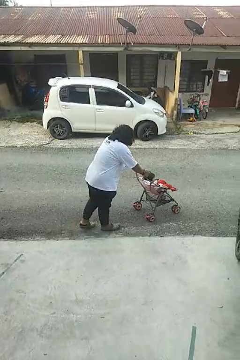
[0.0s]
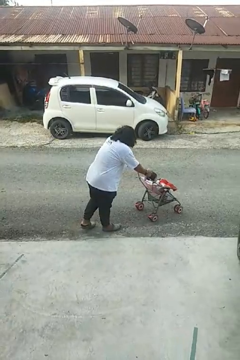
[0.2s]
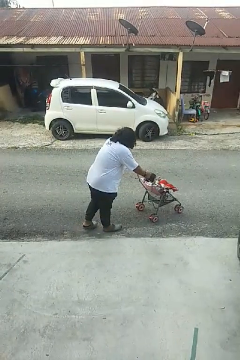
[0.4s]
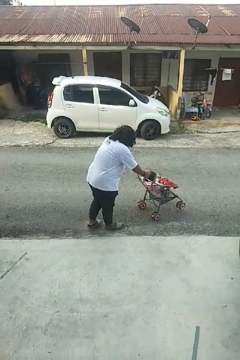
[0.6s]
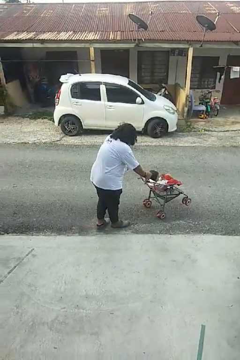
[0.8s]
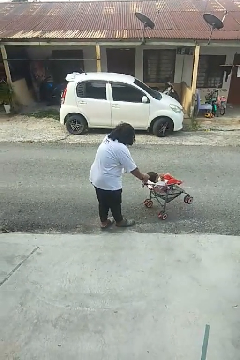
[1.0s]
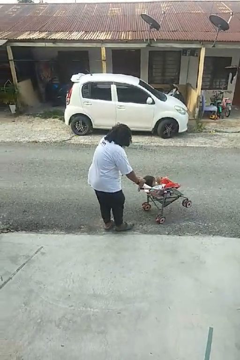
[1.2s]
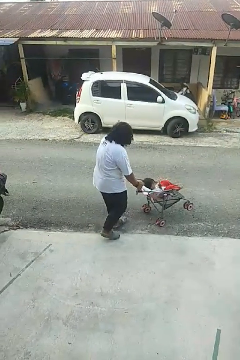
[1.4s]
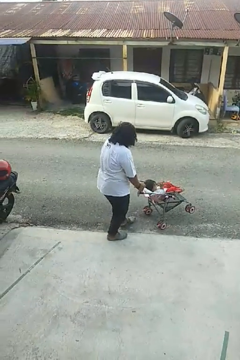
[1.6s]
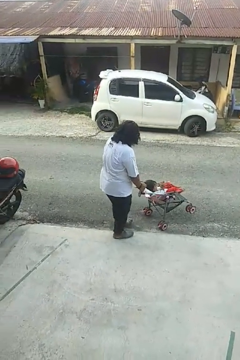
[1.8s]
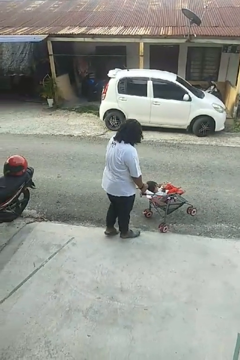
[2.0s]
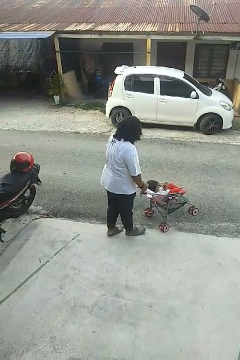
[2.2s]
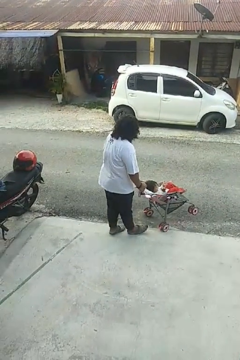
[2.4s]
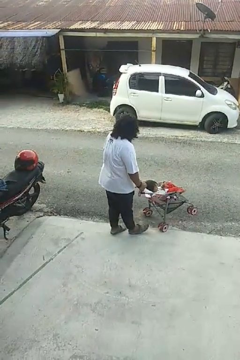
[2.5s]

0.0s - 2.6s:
person pulls wheeled cart

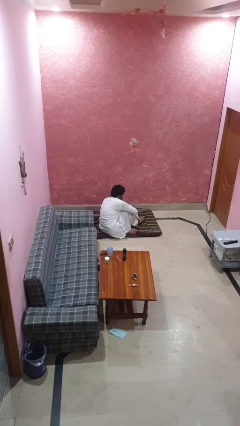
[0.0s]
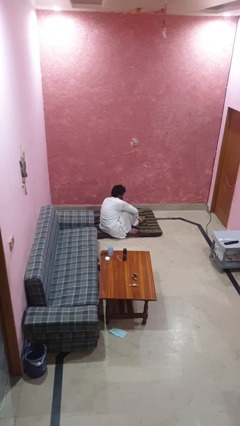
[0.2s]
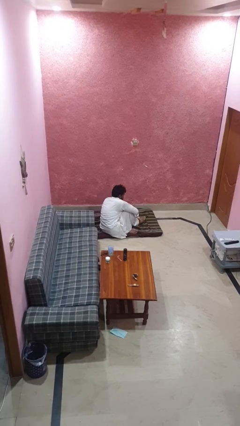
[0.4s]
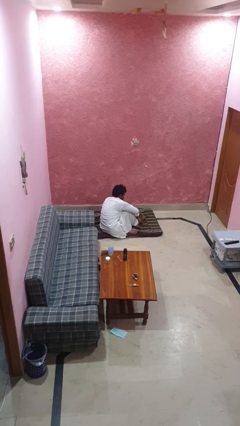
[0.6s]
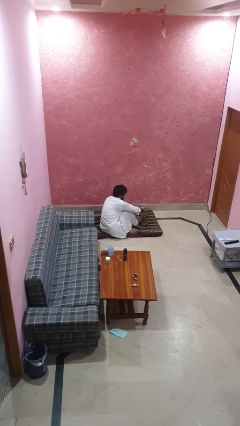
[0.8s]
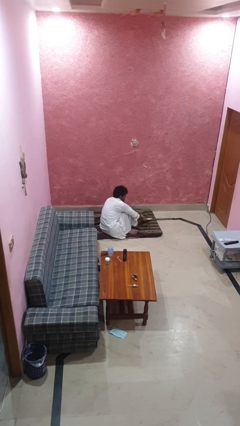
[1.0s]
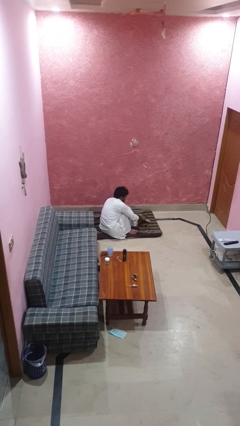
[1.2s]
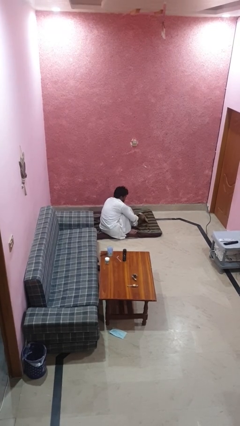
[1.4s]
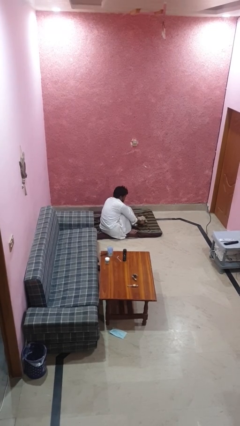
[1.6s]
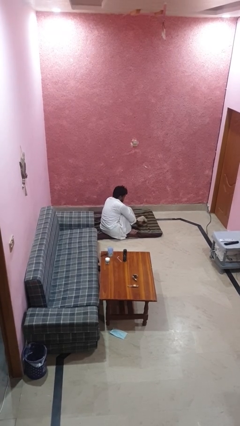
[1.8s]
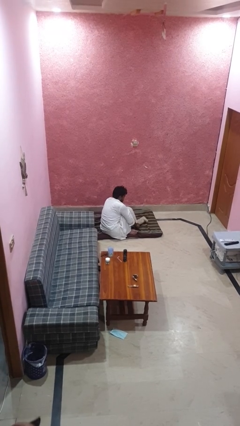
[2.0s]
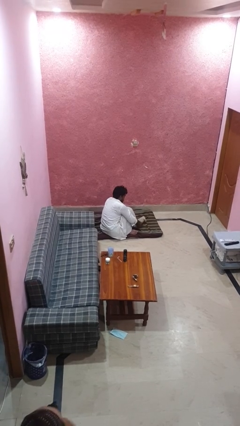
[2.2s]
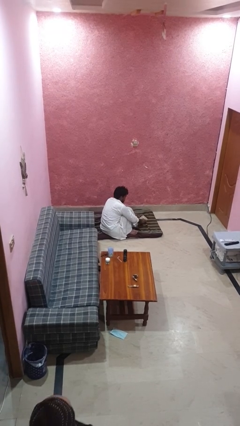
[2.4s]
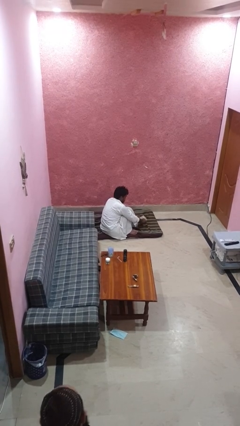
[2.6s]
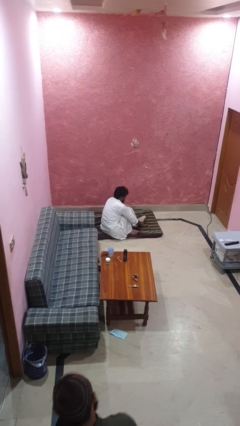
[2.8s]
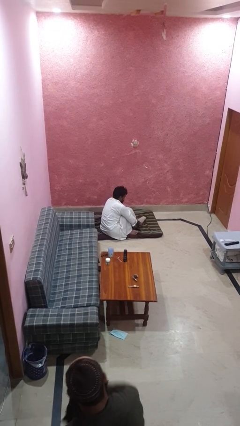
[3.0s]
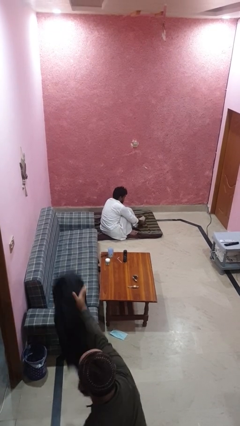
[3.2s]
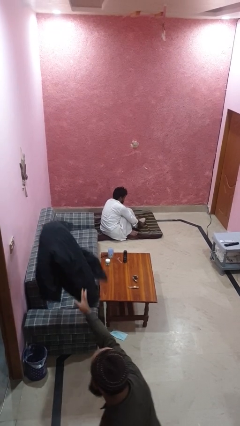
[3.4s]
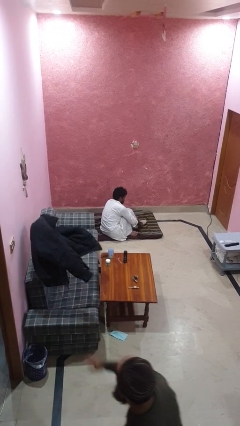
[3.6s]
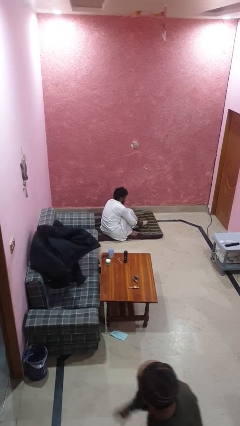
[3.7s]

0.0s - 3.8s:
person puts on socks

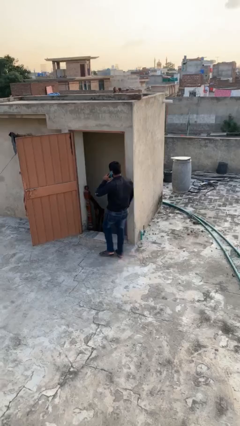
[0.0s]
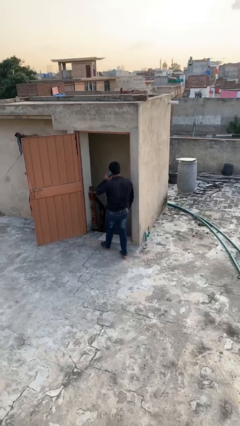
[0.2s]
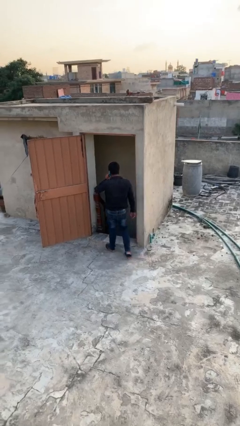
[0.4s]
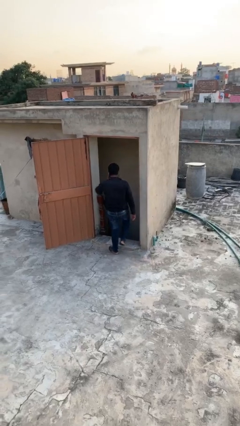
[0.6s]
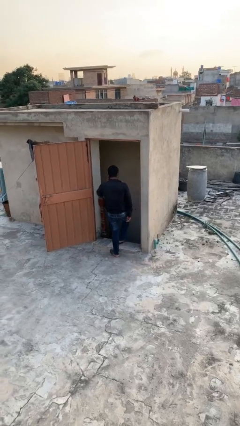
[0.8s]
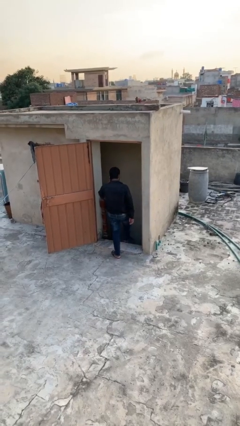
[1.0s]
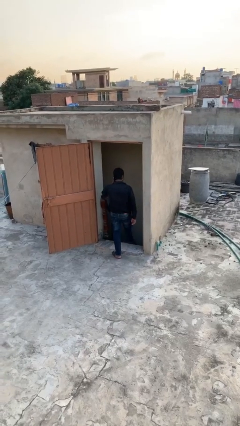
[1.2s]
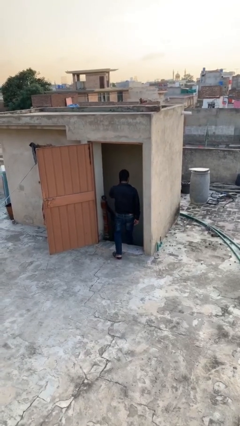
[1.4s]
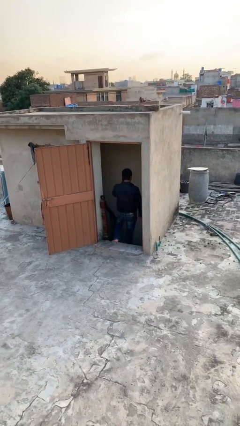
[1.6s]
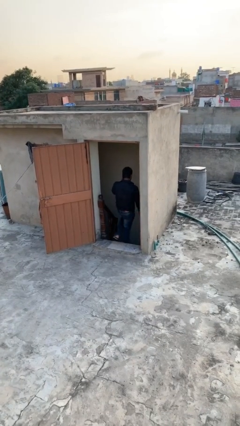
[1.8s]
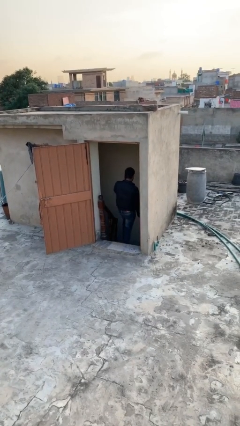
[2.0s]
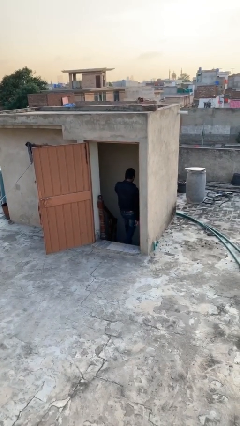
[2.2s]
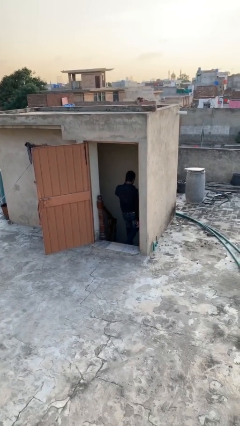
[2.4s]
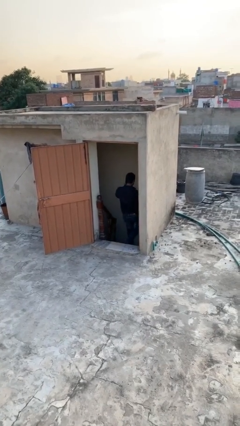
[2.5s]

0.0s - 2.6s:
person exits scene through structure

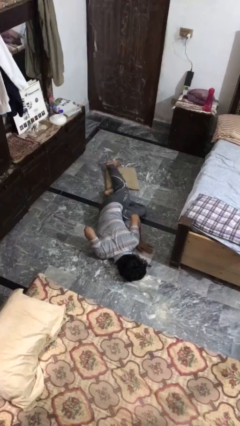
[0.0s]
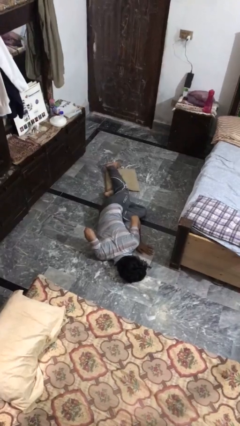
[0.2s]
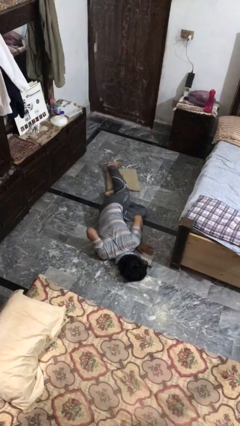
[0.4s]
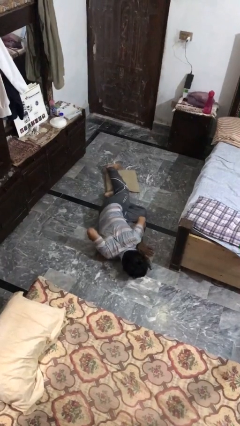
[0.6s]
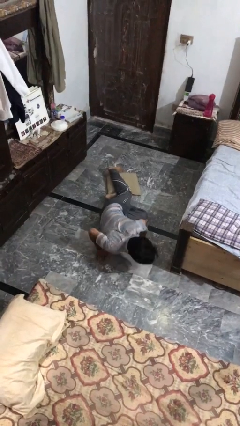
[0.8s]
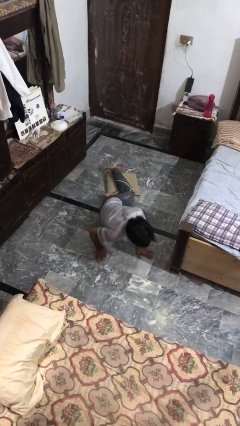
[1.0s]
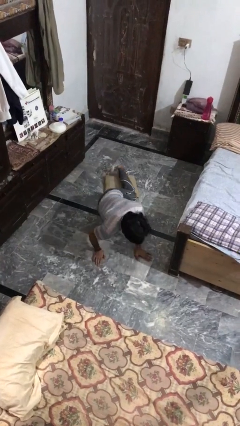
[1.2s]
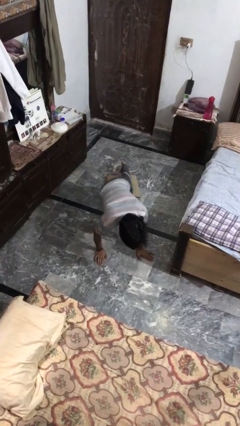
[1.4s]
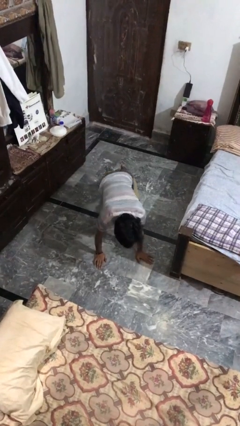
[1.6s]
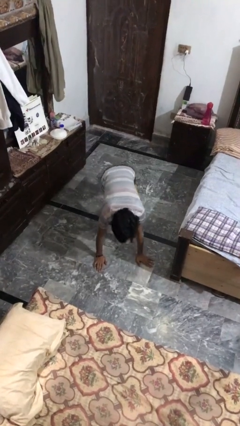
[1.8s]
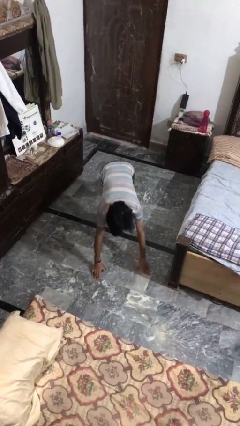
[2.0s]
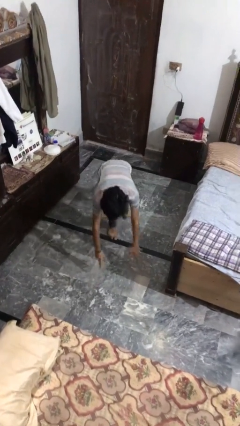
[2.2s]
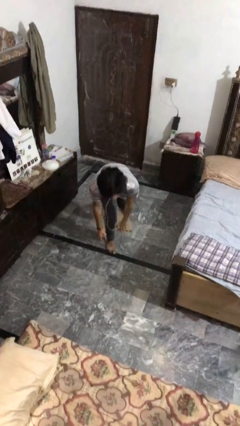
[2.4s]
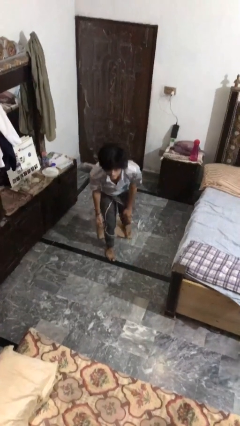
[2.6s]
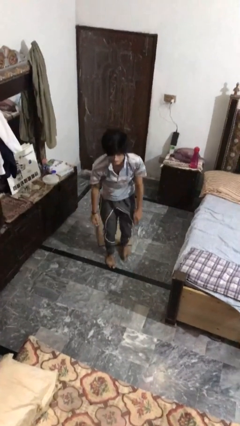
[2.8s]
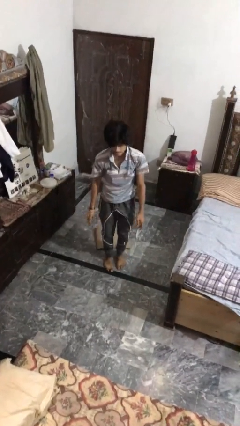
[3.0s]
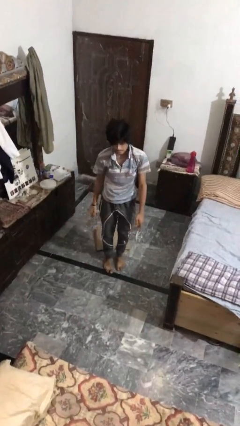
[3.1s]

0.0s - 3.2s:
person stands up from floor

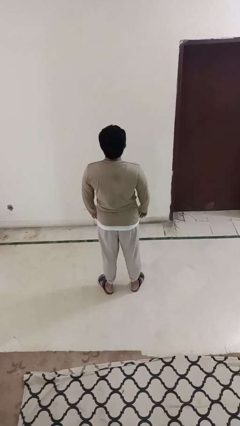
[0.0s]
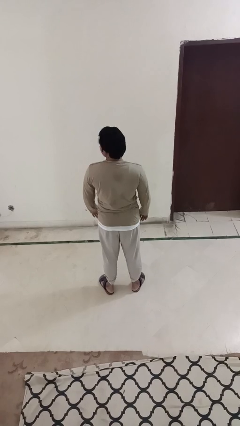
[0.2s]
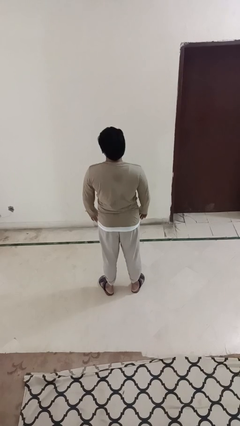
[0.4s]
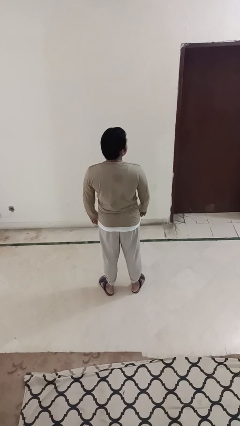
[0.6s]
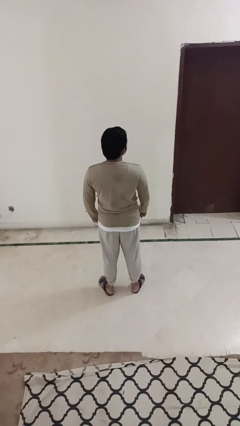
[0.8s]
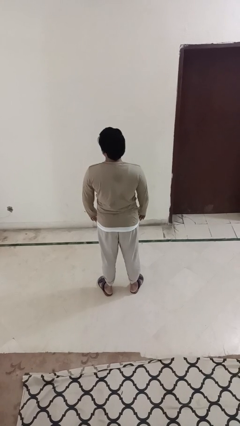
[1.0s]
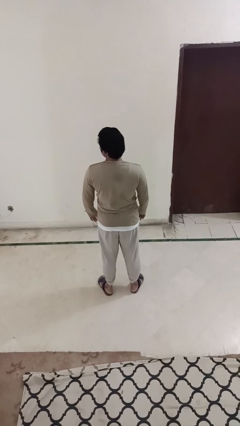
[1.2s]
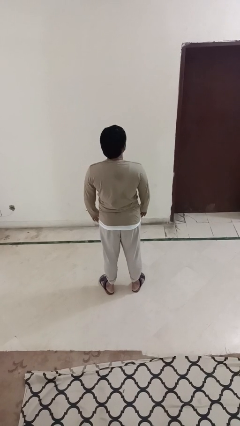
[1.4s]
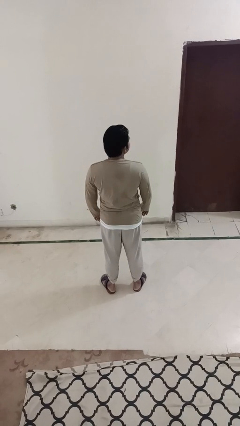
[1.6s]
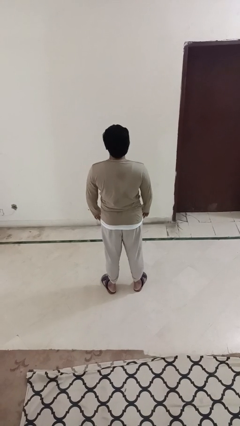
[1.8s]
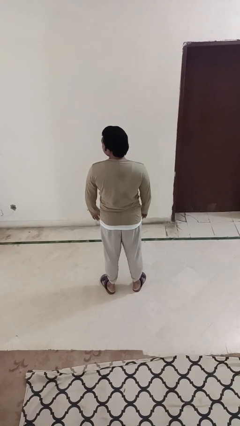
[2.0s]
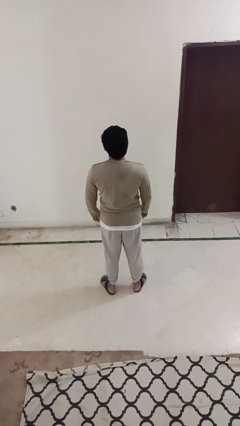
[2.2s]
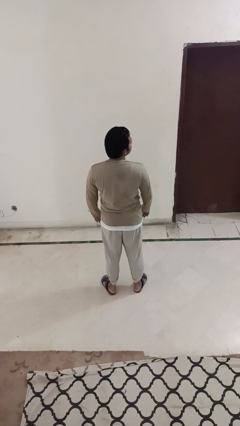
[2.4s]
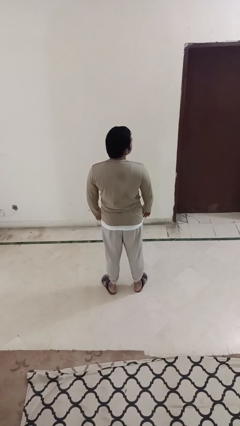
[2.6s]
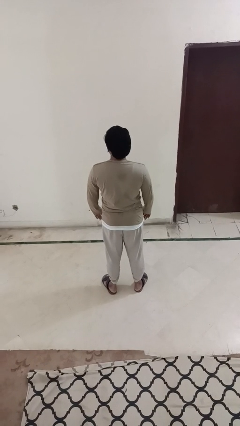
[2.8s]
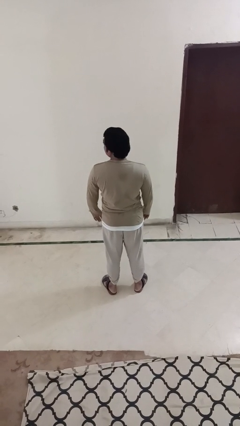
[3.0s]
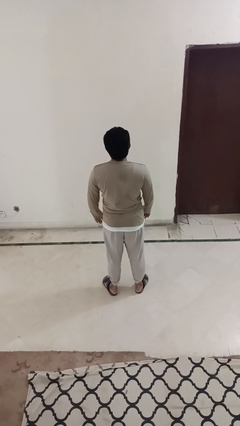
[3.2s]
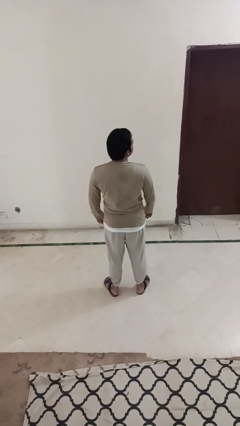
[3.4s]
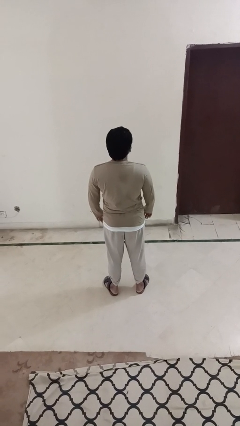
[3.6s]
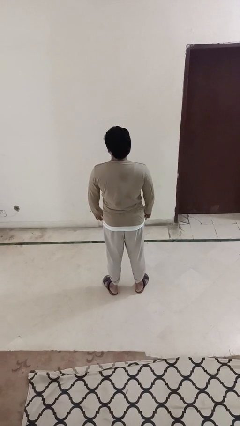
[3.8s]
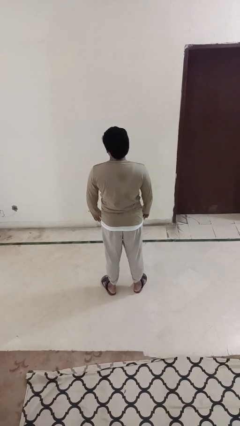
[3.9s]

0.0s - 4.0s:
person shakes head

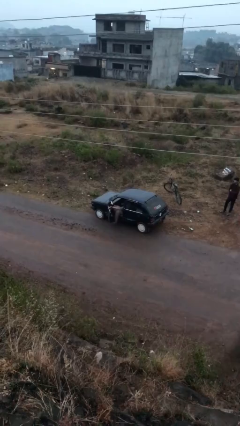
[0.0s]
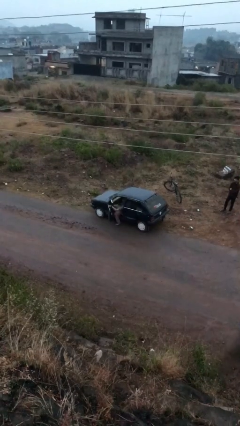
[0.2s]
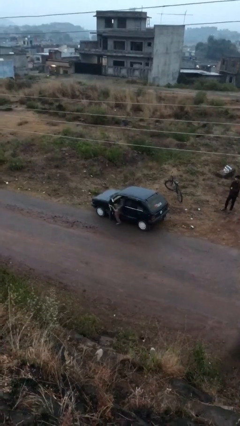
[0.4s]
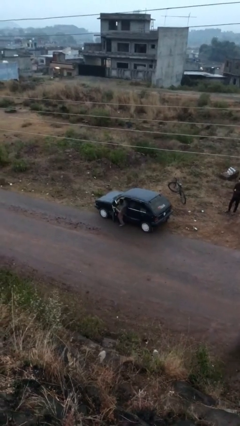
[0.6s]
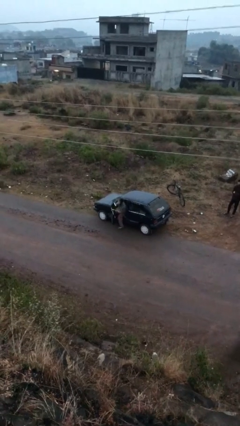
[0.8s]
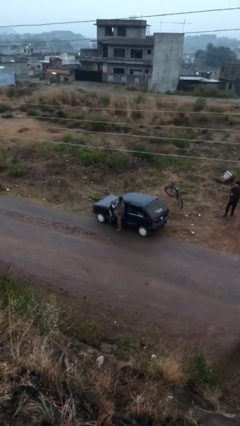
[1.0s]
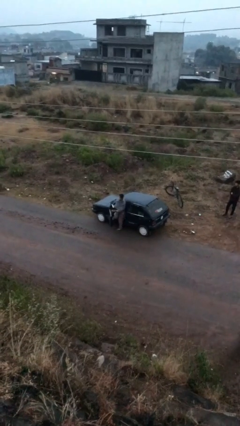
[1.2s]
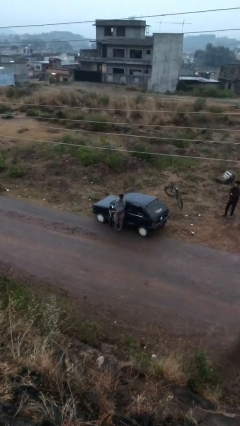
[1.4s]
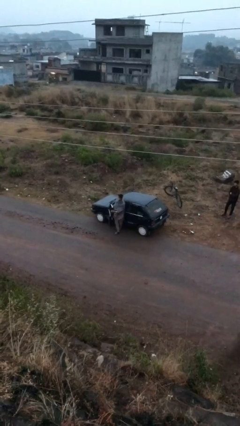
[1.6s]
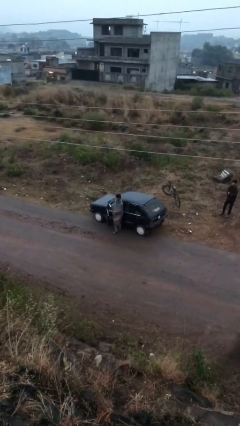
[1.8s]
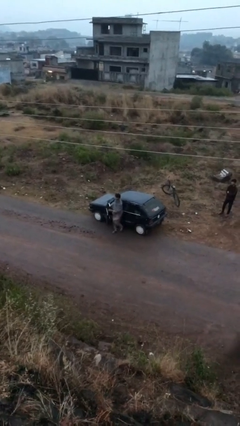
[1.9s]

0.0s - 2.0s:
person exits car
